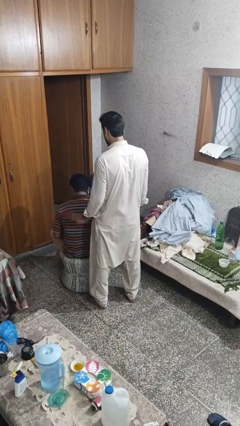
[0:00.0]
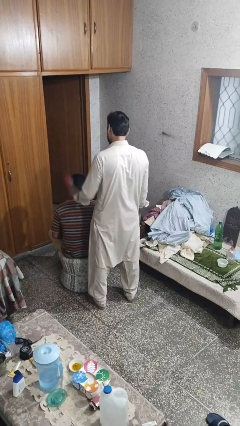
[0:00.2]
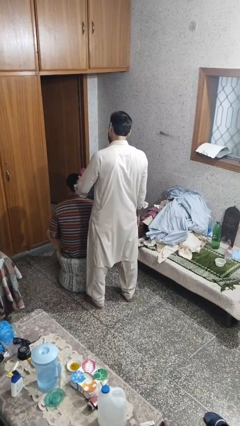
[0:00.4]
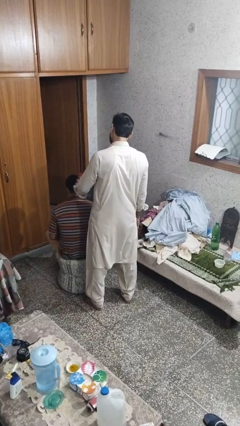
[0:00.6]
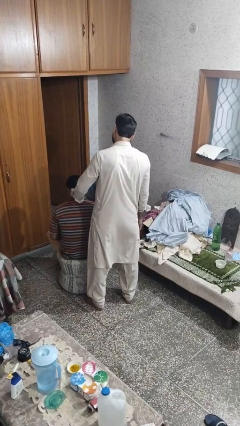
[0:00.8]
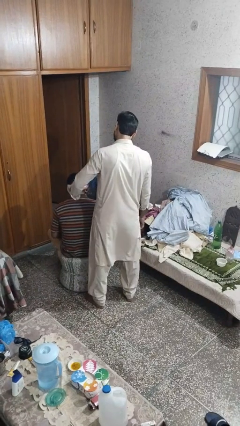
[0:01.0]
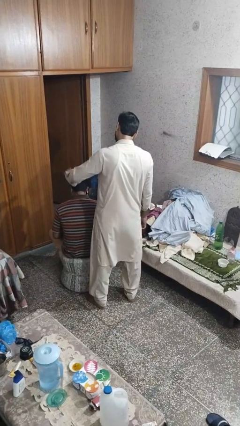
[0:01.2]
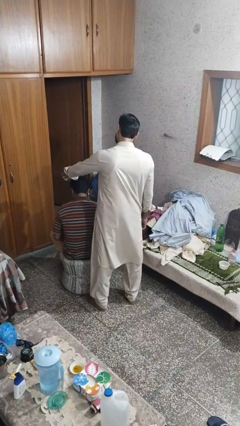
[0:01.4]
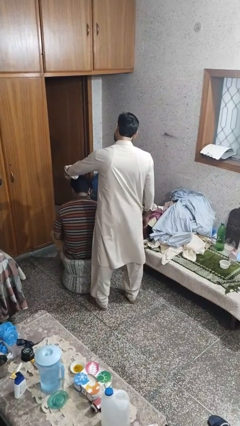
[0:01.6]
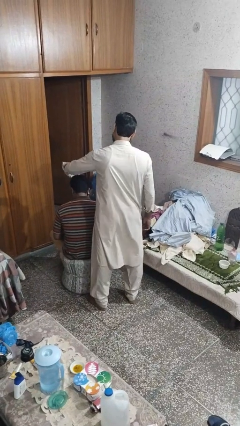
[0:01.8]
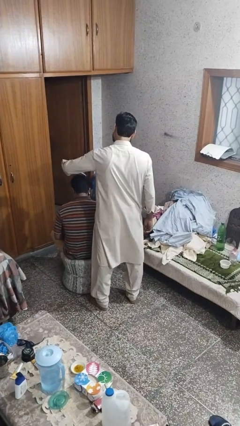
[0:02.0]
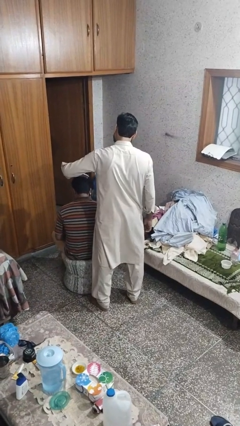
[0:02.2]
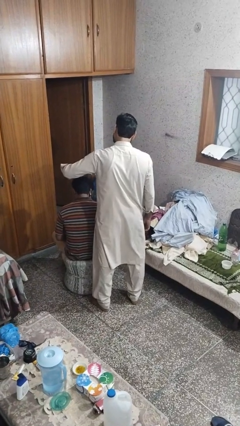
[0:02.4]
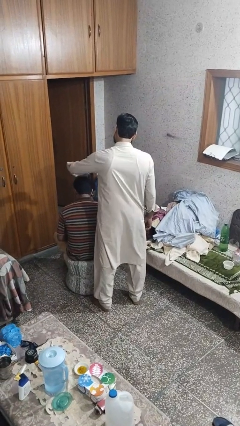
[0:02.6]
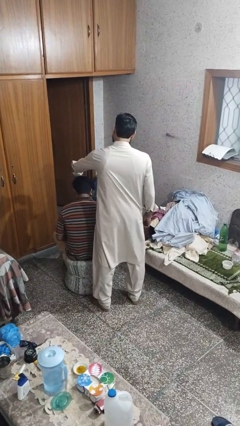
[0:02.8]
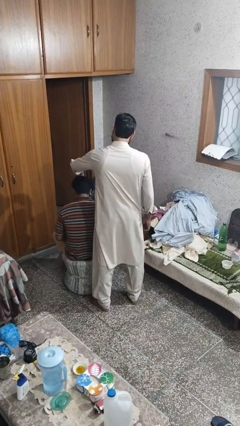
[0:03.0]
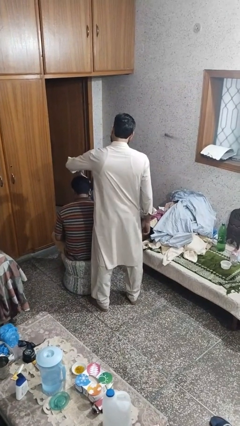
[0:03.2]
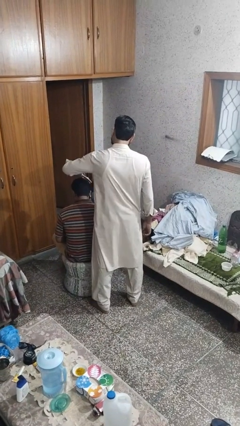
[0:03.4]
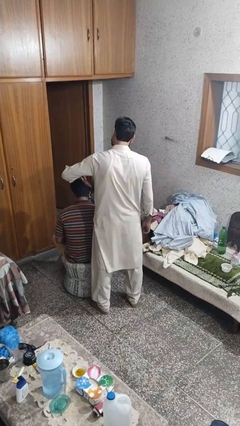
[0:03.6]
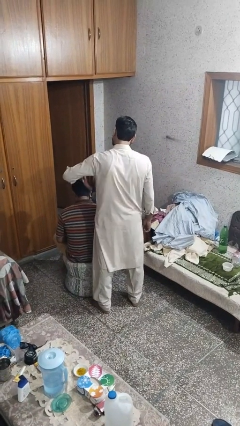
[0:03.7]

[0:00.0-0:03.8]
person brushes hair of person

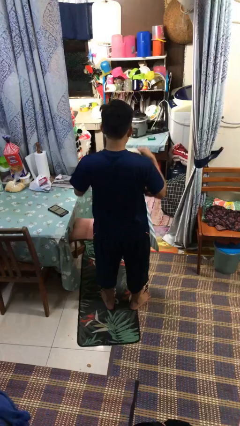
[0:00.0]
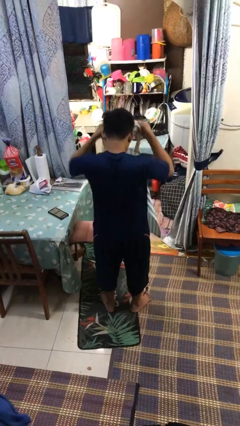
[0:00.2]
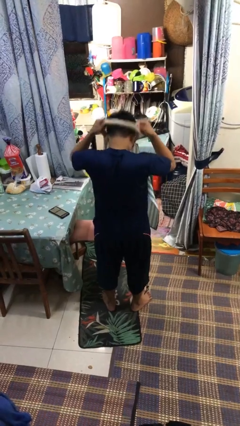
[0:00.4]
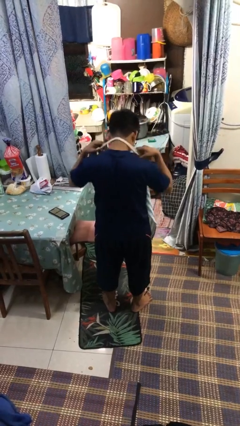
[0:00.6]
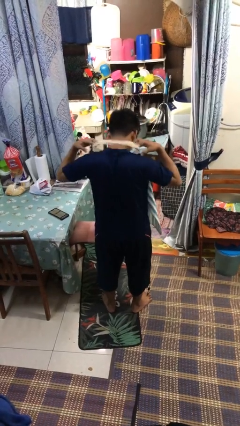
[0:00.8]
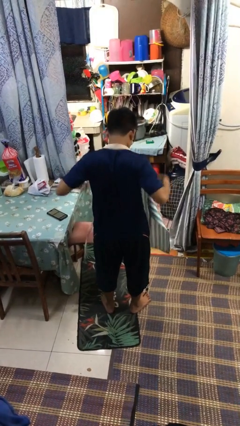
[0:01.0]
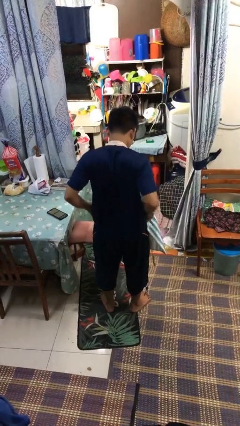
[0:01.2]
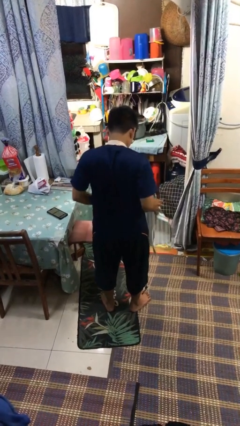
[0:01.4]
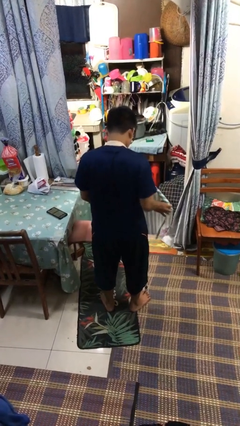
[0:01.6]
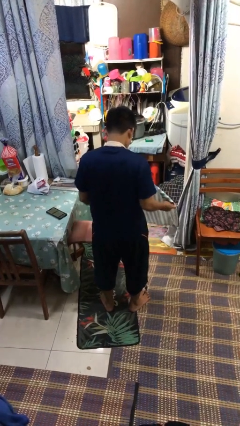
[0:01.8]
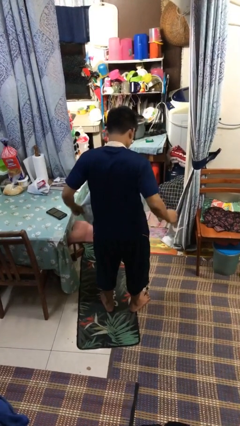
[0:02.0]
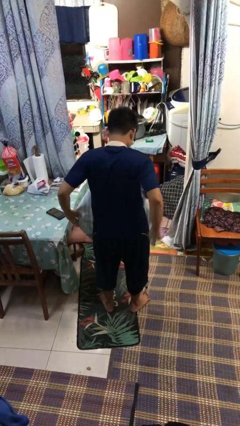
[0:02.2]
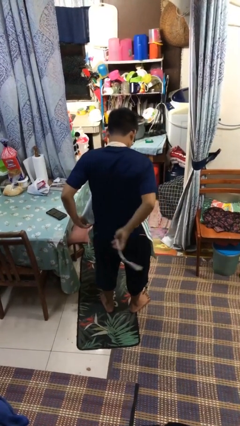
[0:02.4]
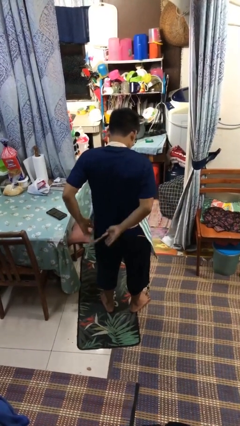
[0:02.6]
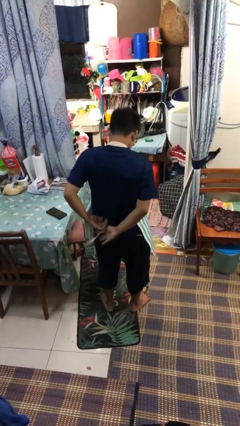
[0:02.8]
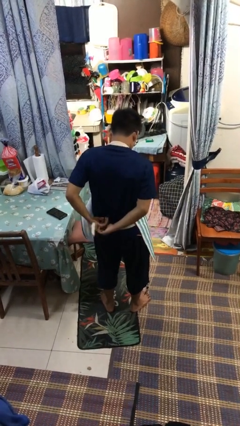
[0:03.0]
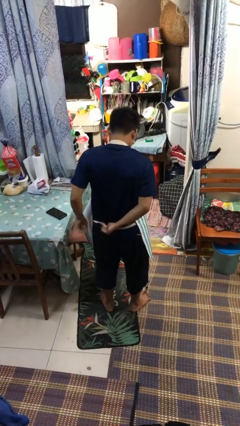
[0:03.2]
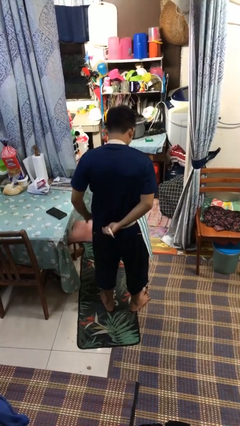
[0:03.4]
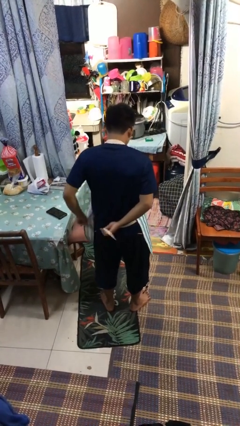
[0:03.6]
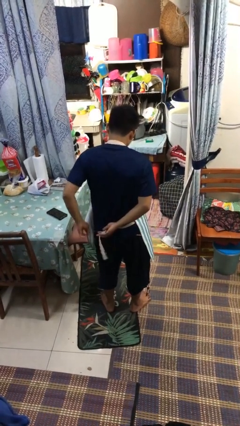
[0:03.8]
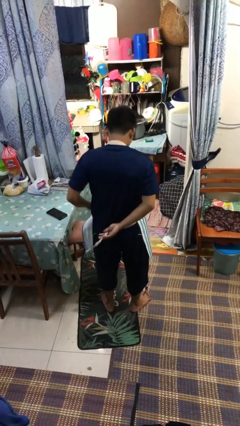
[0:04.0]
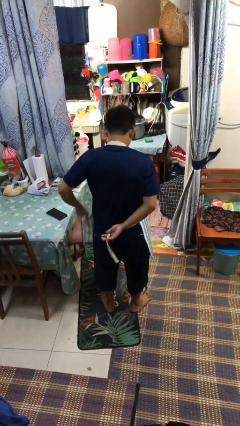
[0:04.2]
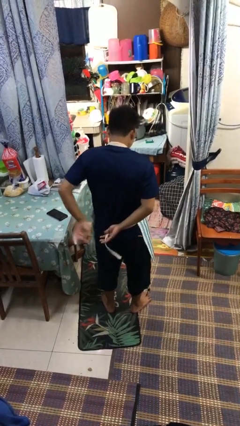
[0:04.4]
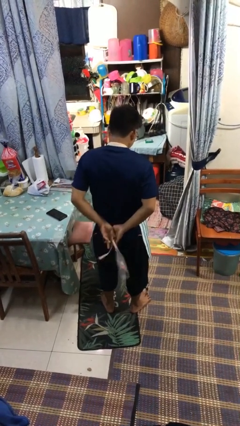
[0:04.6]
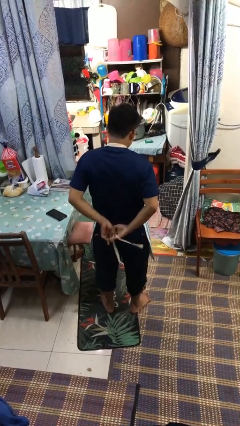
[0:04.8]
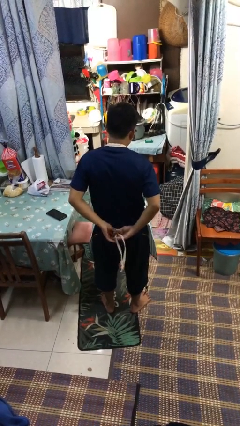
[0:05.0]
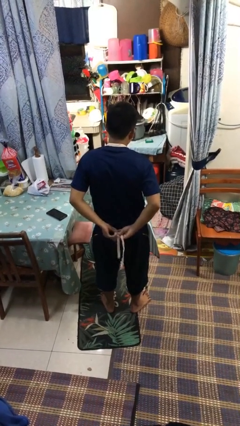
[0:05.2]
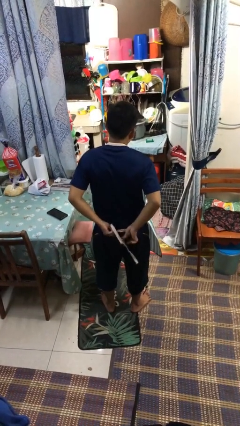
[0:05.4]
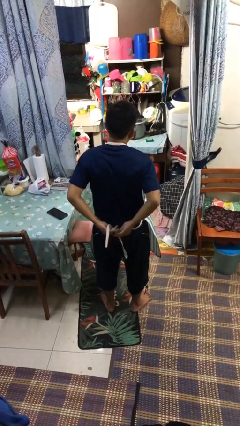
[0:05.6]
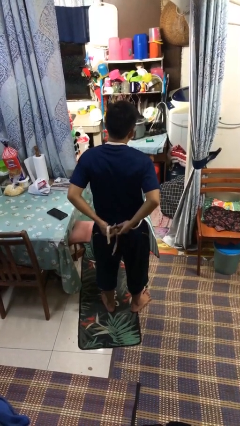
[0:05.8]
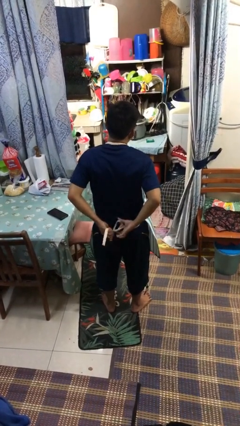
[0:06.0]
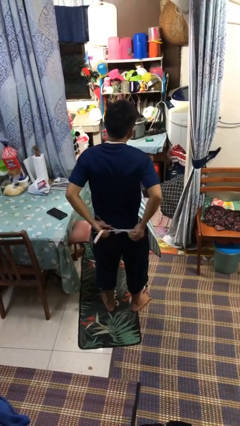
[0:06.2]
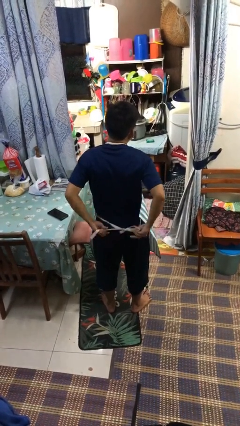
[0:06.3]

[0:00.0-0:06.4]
person puts on apron

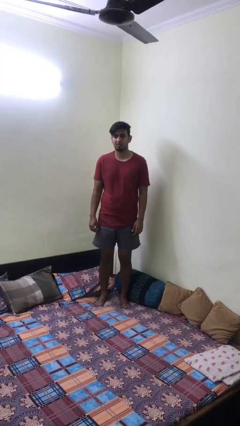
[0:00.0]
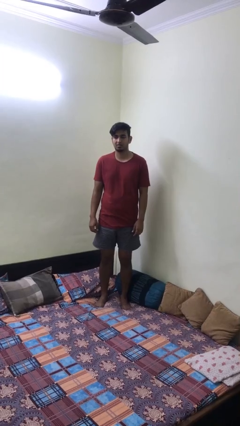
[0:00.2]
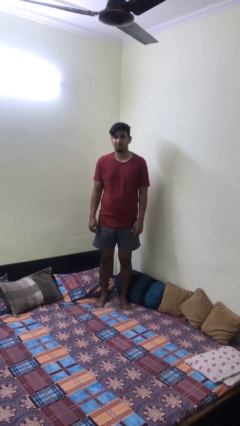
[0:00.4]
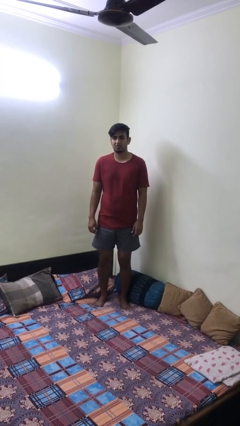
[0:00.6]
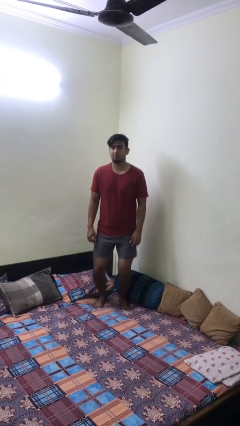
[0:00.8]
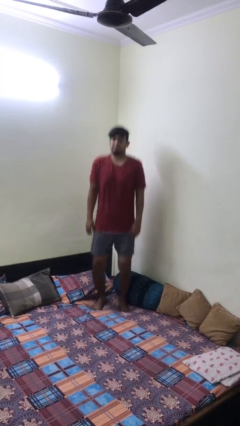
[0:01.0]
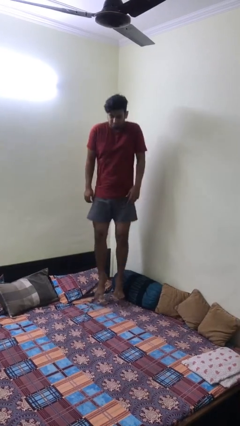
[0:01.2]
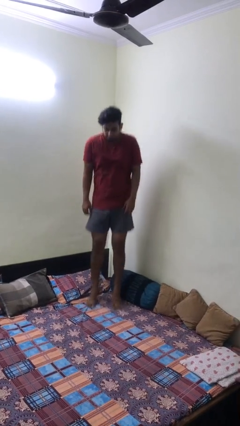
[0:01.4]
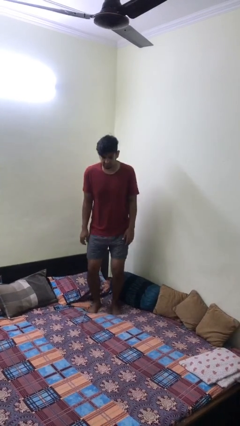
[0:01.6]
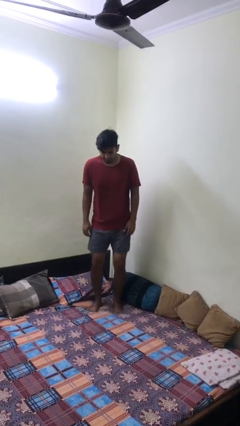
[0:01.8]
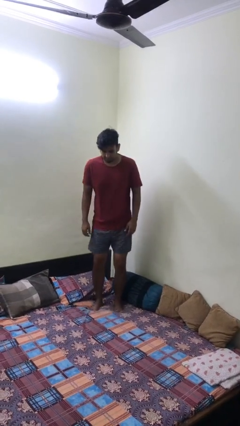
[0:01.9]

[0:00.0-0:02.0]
person jumps on bed

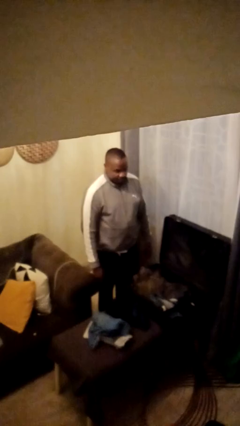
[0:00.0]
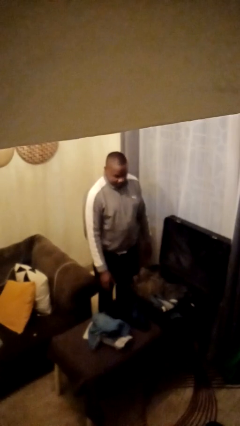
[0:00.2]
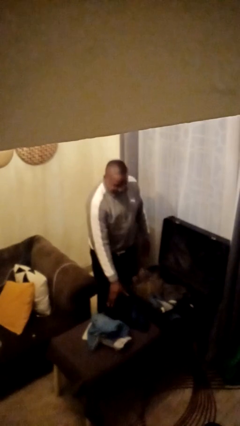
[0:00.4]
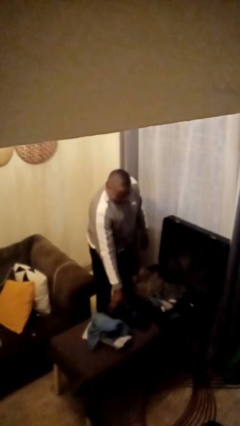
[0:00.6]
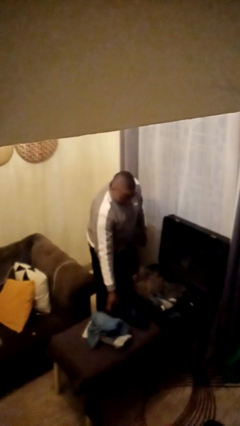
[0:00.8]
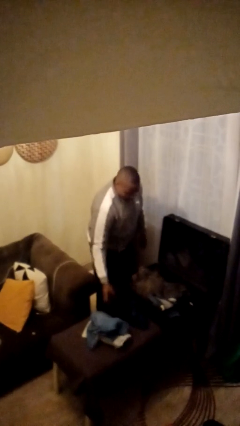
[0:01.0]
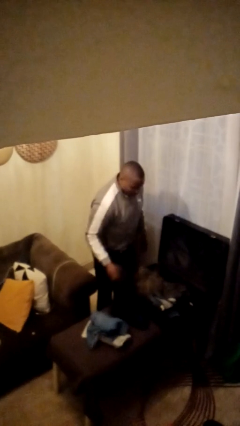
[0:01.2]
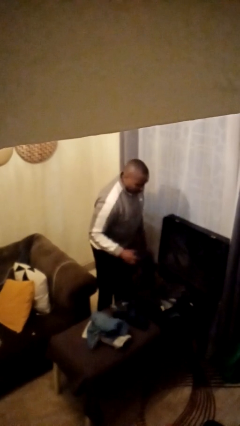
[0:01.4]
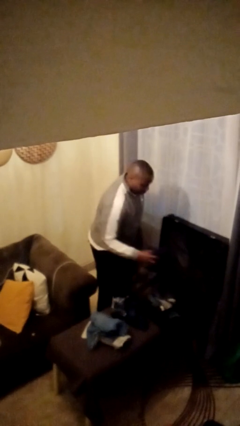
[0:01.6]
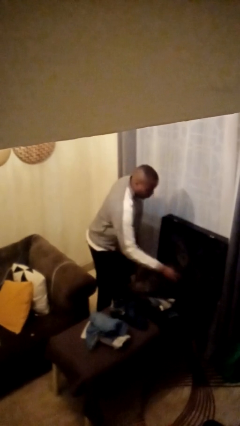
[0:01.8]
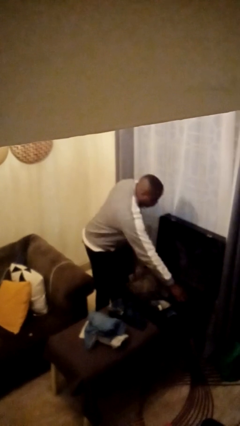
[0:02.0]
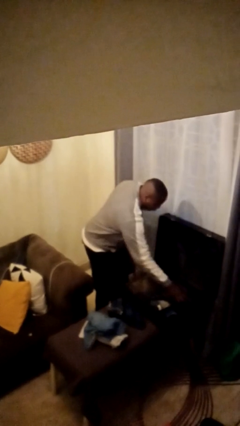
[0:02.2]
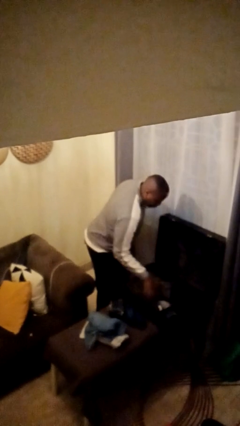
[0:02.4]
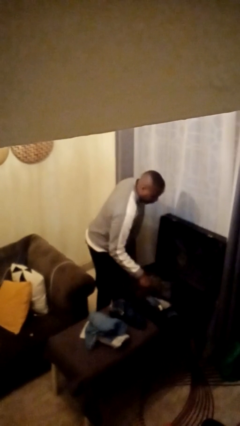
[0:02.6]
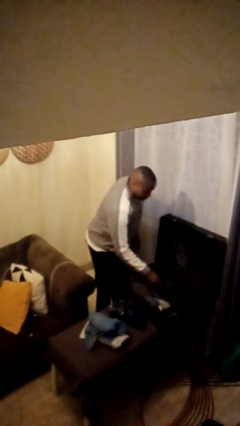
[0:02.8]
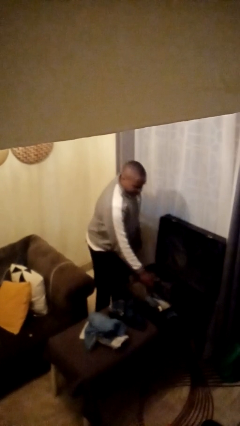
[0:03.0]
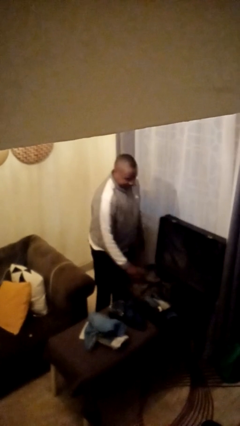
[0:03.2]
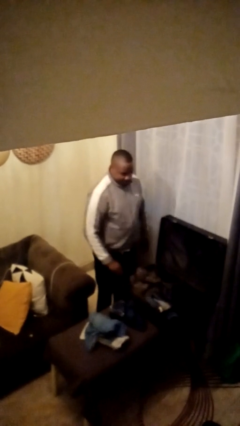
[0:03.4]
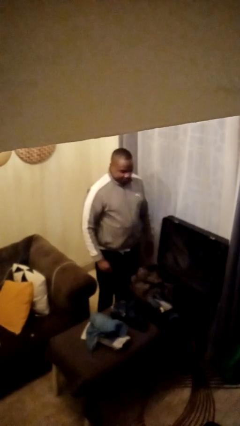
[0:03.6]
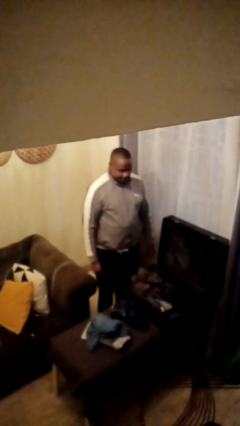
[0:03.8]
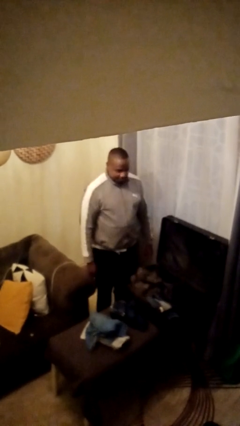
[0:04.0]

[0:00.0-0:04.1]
person loads clothes into suitcase

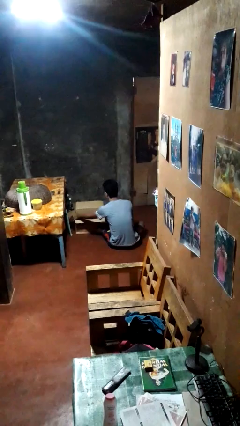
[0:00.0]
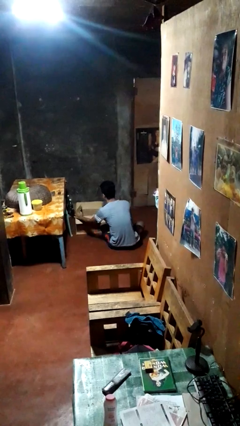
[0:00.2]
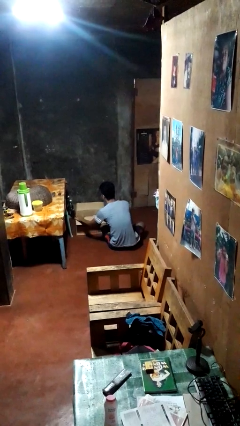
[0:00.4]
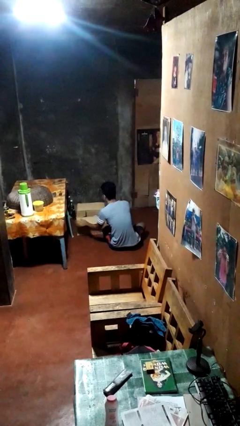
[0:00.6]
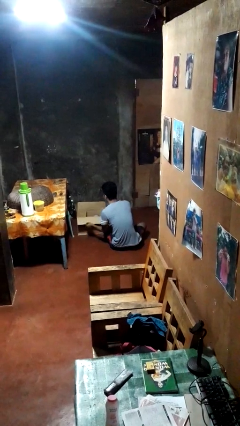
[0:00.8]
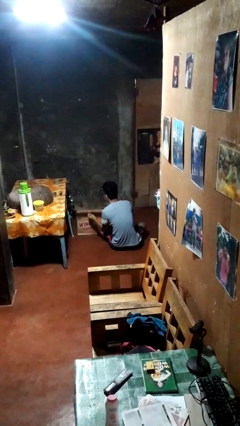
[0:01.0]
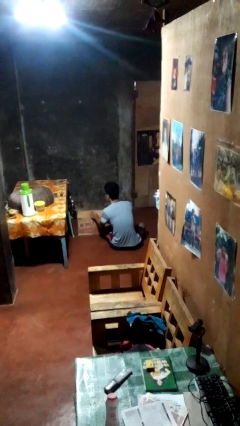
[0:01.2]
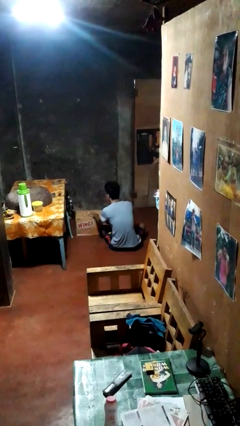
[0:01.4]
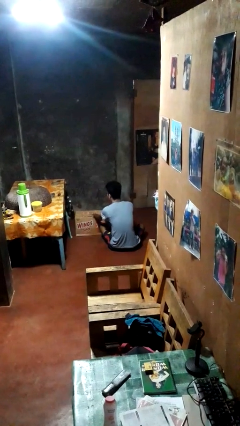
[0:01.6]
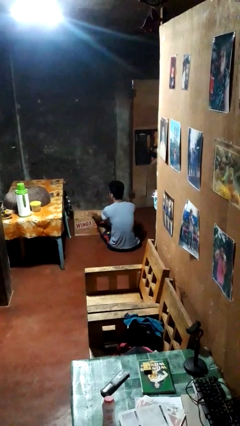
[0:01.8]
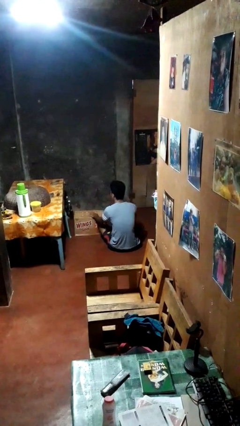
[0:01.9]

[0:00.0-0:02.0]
person closes box
